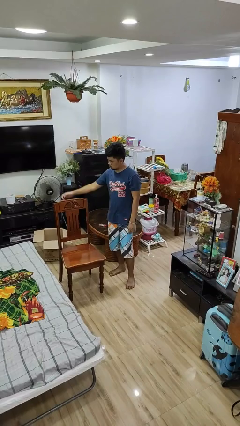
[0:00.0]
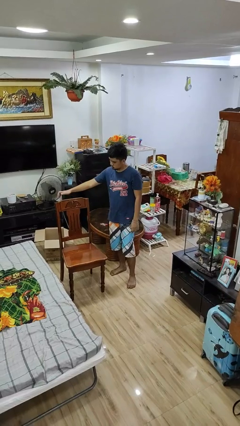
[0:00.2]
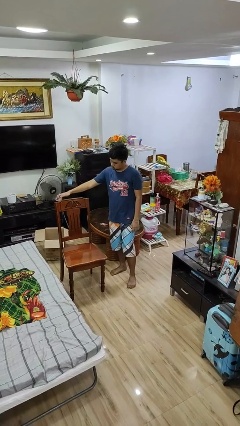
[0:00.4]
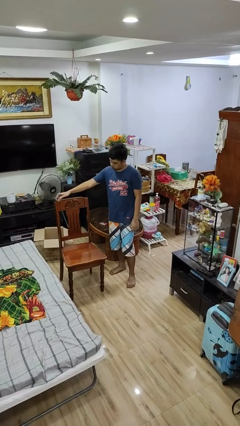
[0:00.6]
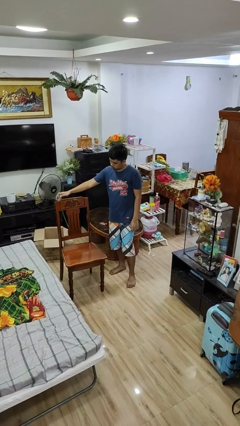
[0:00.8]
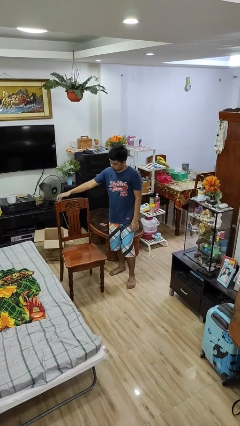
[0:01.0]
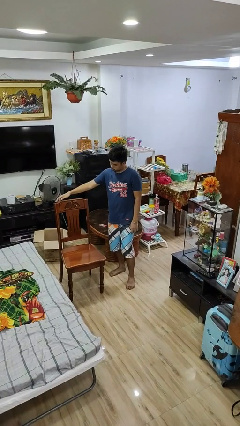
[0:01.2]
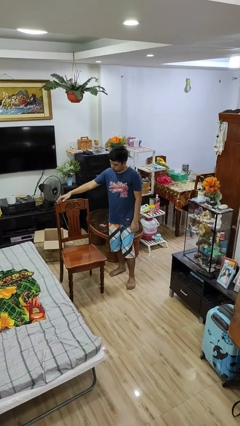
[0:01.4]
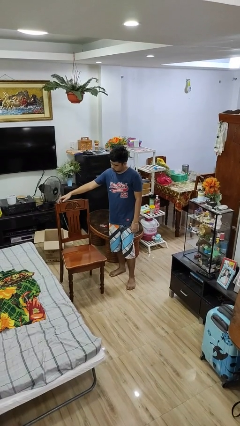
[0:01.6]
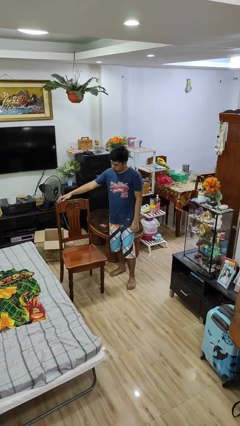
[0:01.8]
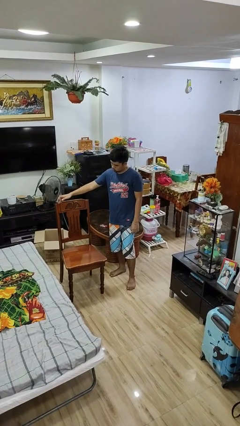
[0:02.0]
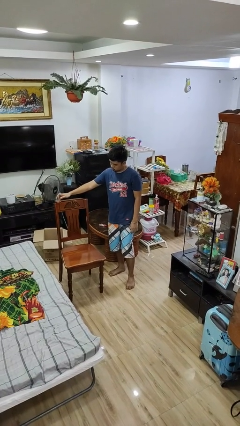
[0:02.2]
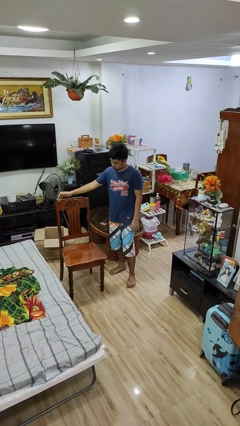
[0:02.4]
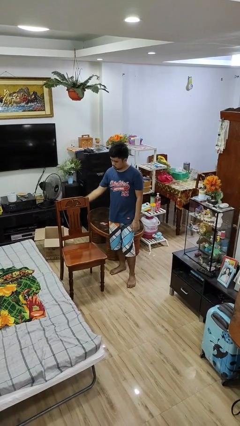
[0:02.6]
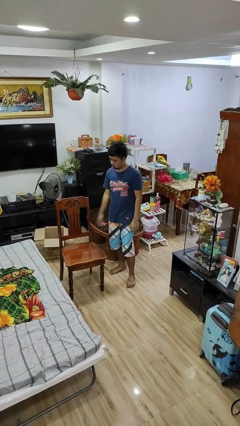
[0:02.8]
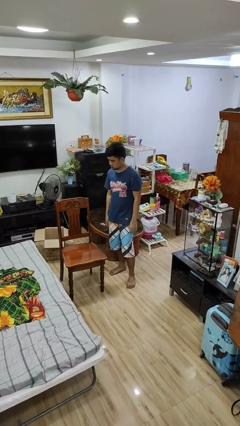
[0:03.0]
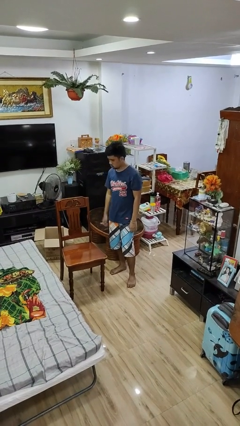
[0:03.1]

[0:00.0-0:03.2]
person taps object with finger

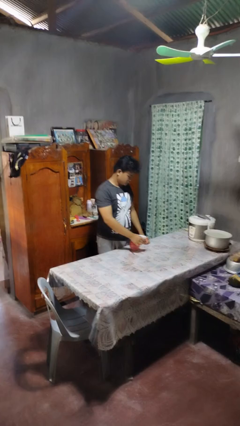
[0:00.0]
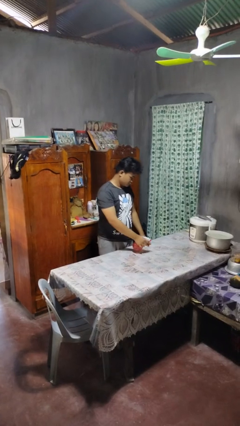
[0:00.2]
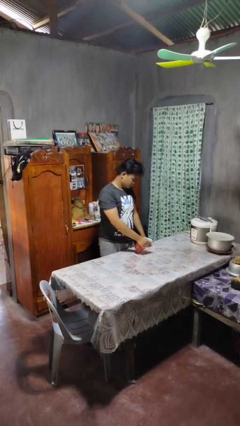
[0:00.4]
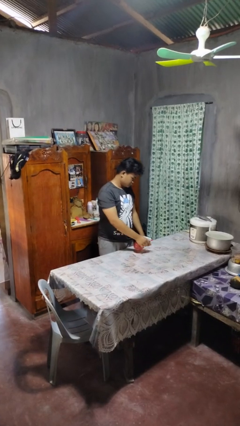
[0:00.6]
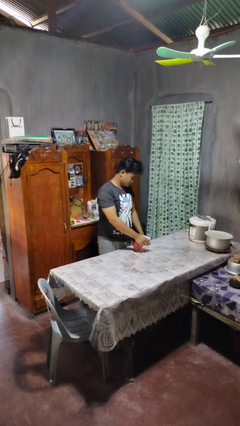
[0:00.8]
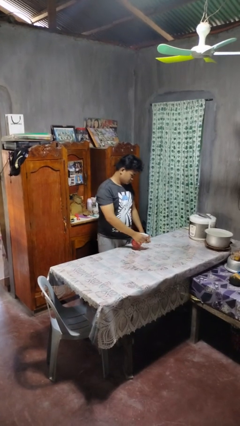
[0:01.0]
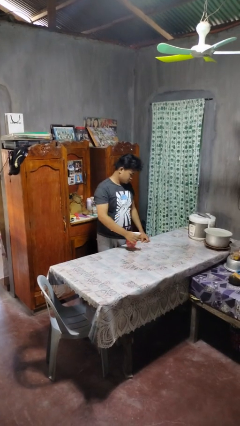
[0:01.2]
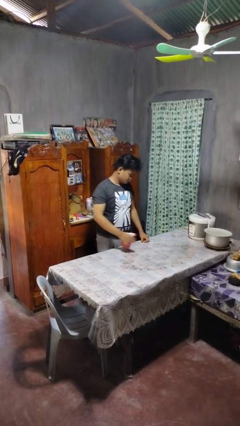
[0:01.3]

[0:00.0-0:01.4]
person sprays from bottle

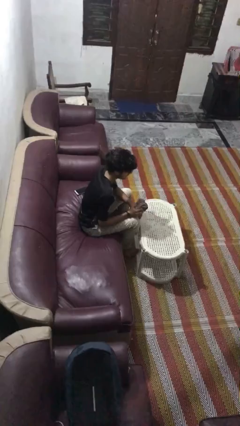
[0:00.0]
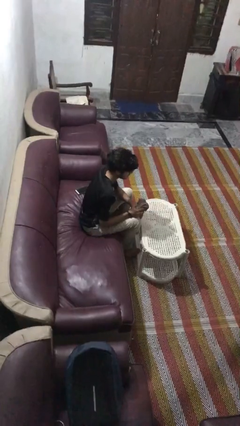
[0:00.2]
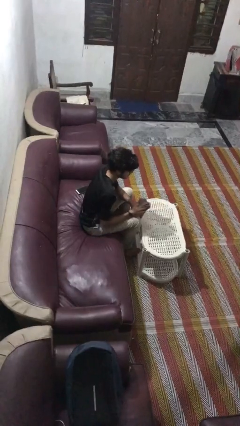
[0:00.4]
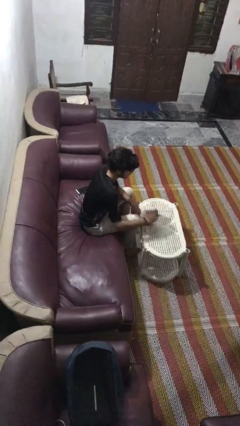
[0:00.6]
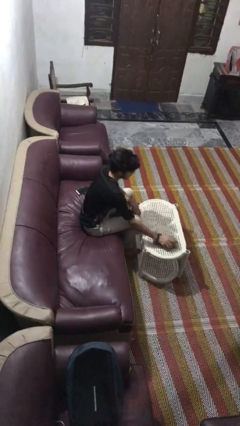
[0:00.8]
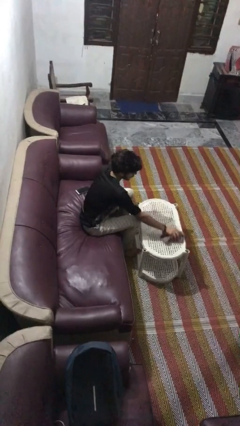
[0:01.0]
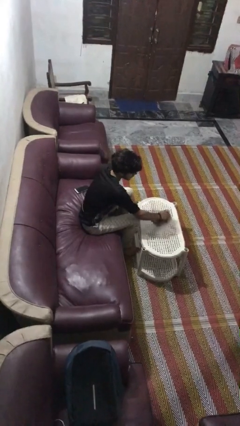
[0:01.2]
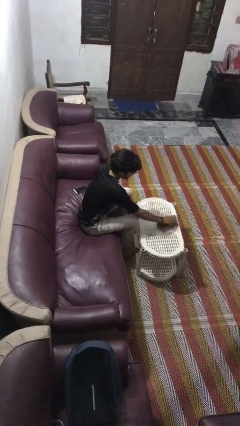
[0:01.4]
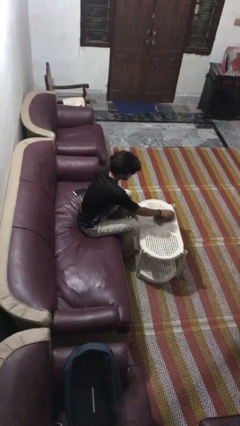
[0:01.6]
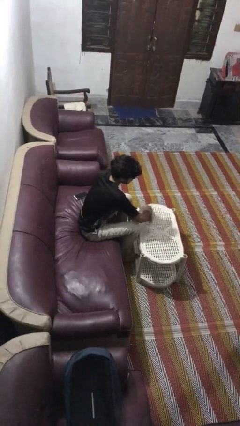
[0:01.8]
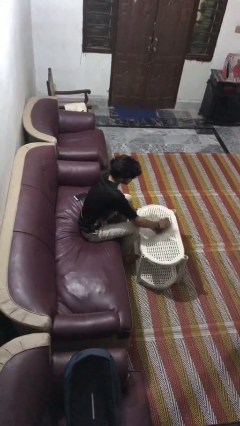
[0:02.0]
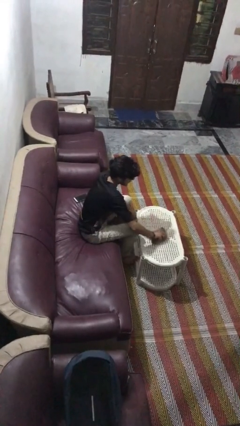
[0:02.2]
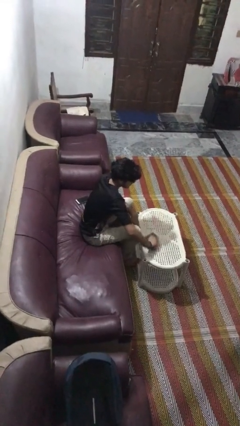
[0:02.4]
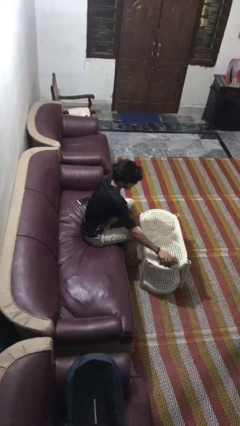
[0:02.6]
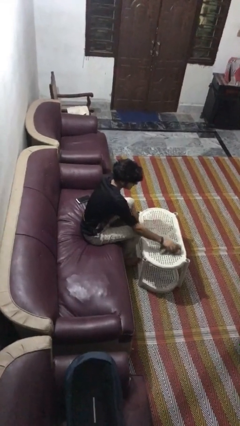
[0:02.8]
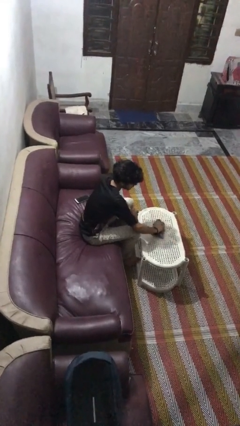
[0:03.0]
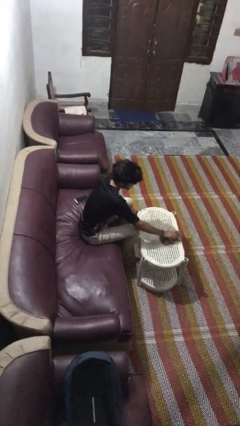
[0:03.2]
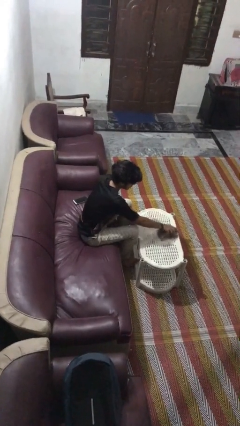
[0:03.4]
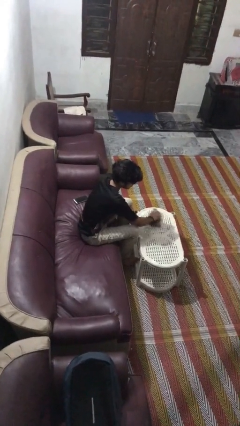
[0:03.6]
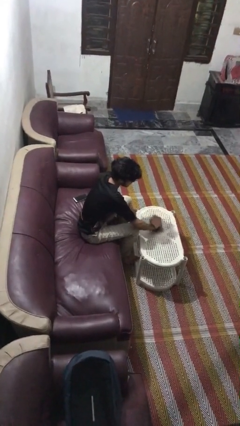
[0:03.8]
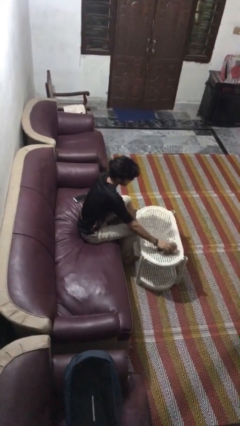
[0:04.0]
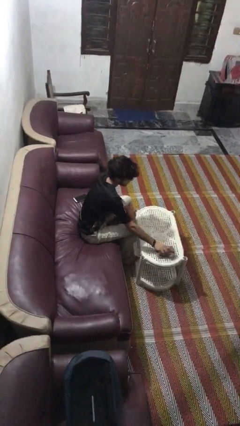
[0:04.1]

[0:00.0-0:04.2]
person cleans table with rag

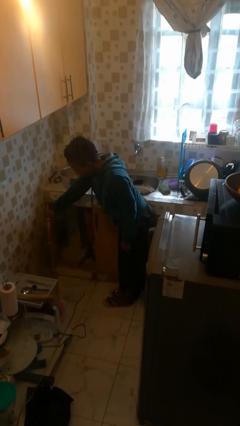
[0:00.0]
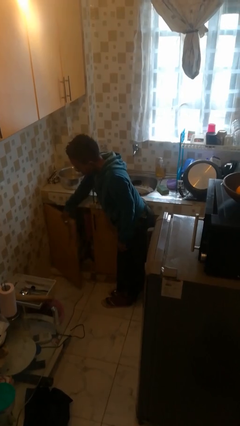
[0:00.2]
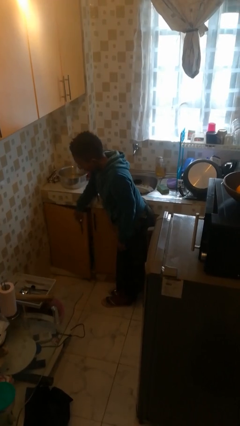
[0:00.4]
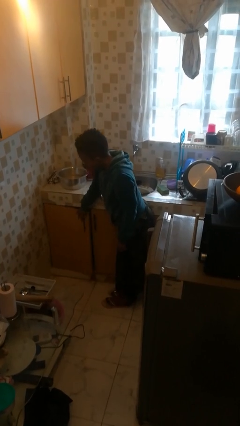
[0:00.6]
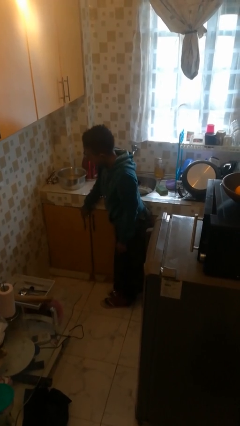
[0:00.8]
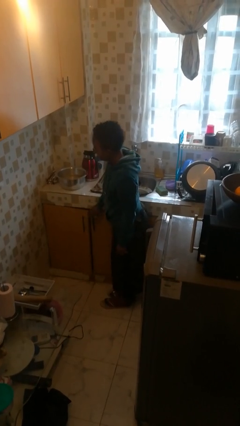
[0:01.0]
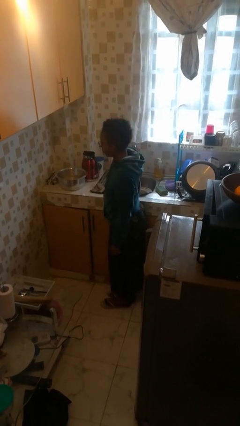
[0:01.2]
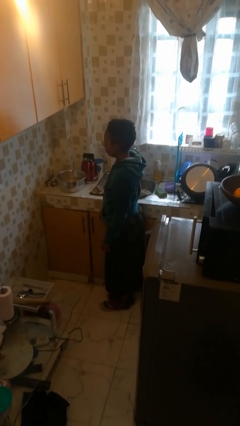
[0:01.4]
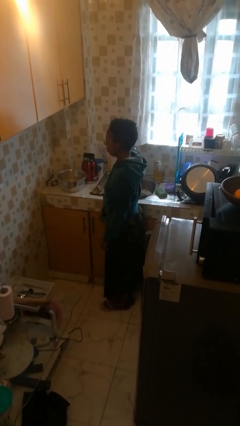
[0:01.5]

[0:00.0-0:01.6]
person closes cabinet

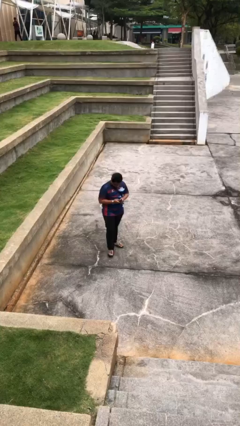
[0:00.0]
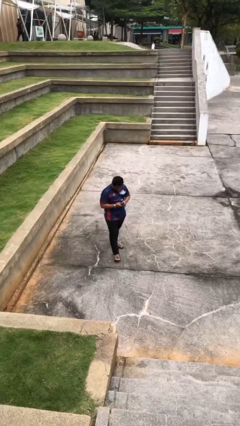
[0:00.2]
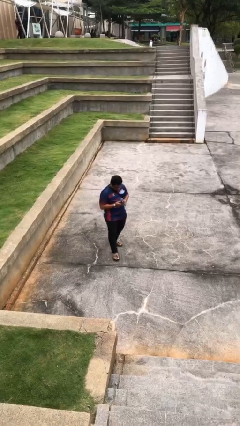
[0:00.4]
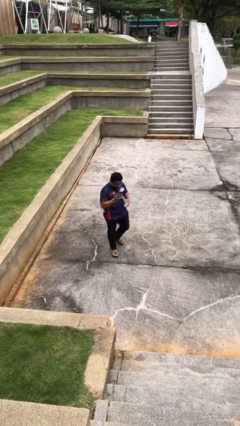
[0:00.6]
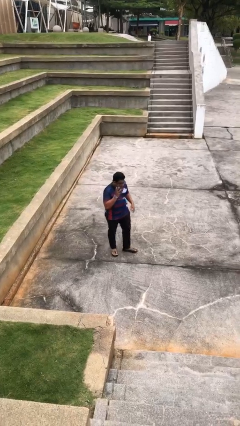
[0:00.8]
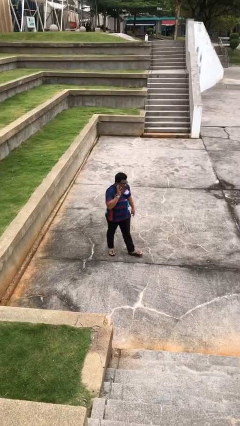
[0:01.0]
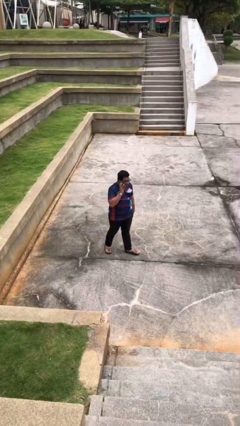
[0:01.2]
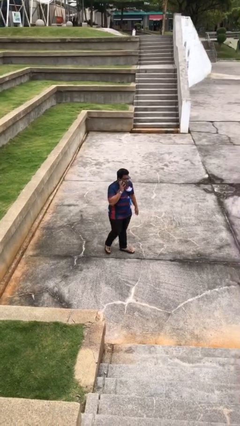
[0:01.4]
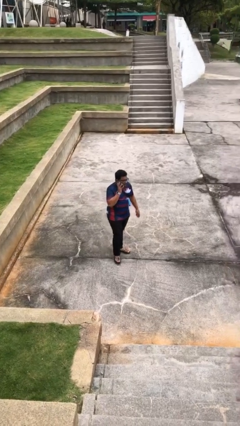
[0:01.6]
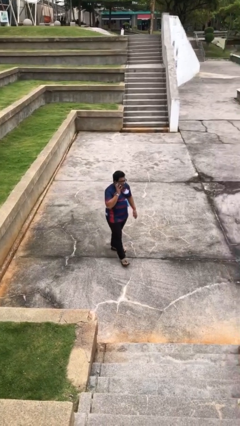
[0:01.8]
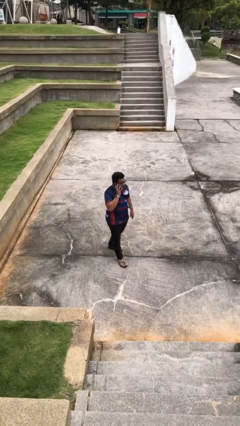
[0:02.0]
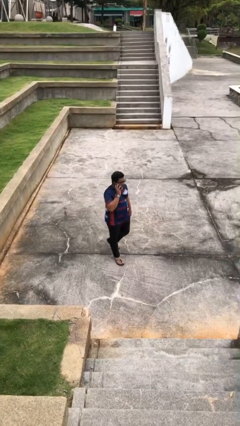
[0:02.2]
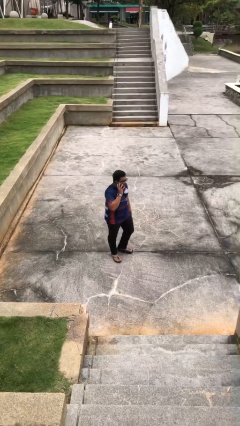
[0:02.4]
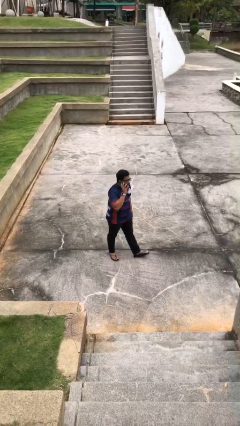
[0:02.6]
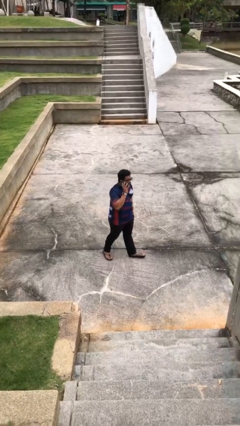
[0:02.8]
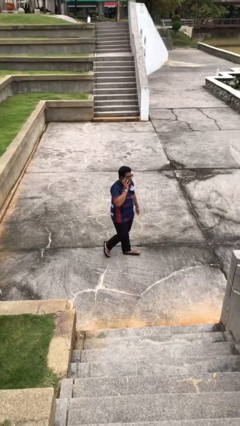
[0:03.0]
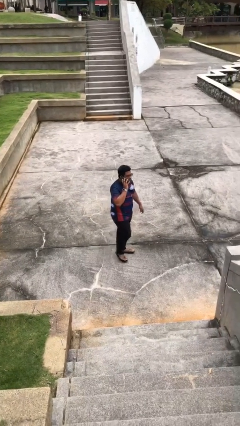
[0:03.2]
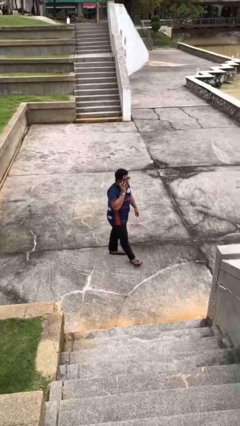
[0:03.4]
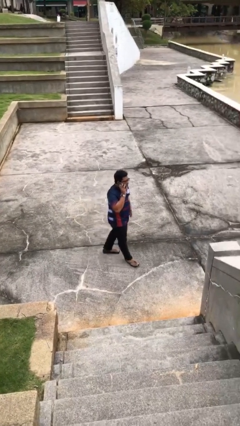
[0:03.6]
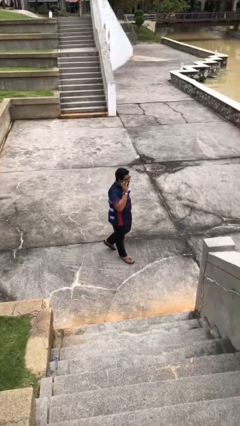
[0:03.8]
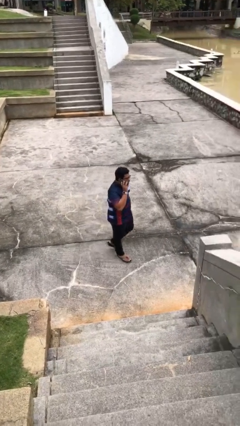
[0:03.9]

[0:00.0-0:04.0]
person talks on phone

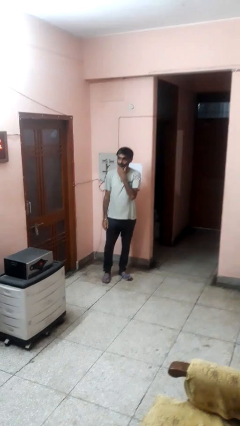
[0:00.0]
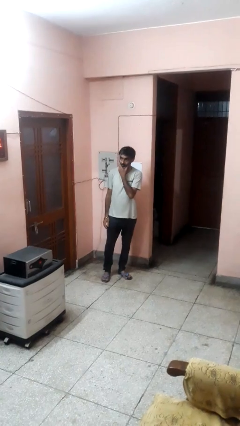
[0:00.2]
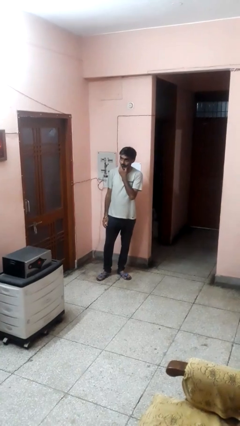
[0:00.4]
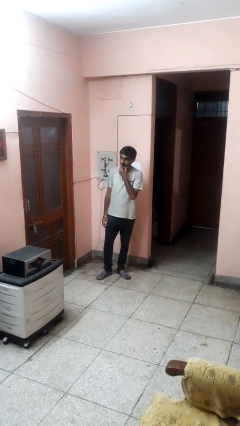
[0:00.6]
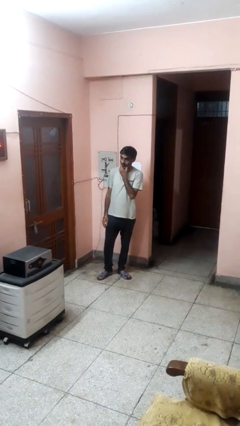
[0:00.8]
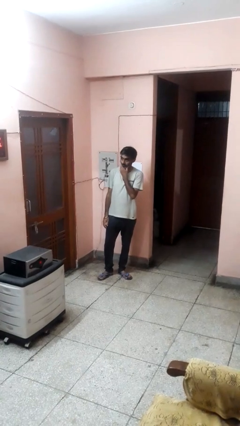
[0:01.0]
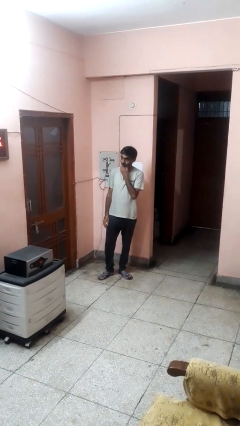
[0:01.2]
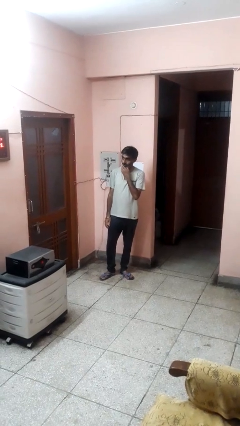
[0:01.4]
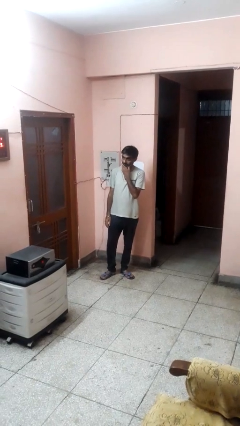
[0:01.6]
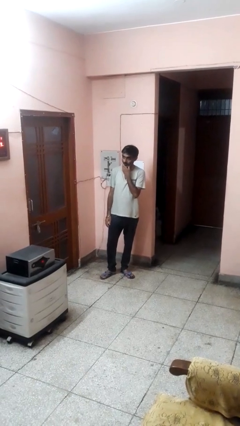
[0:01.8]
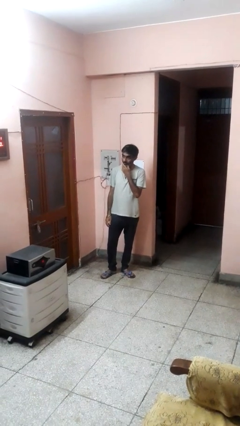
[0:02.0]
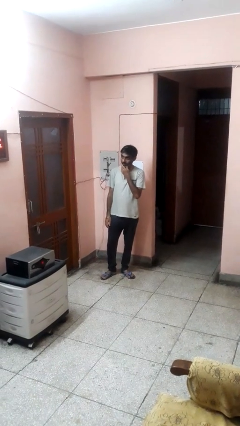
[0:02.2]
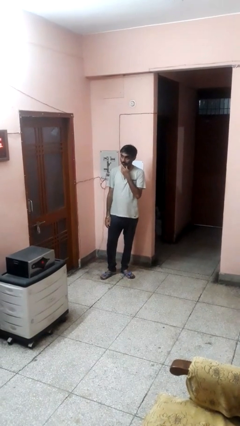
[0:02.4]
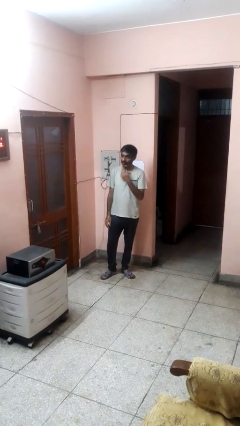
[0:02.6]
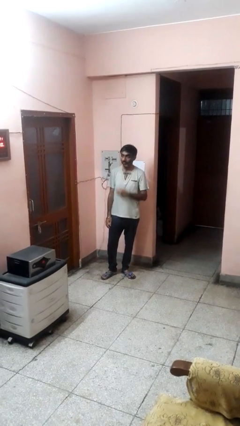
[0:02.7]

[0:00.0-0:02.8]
person strokes chin
